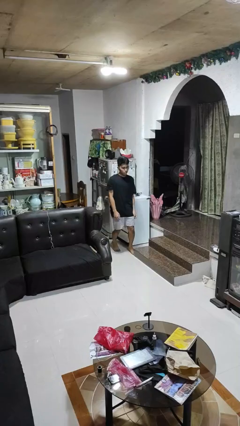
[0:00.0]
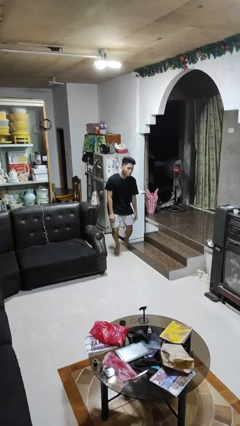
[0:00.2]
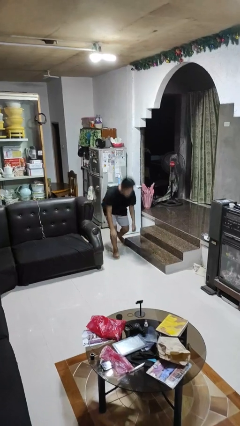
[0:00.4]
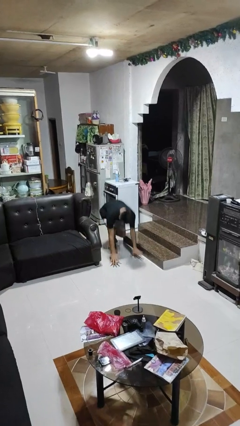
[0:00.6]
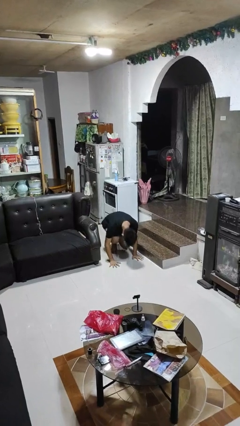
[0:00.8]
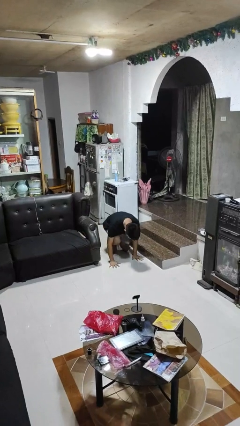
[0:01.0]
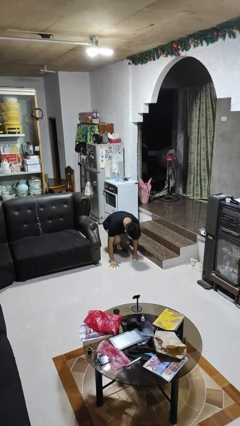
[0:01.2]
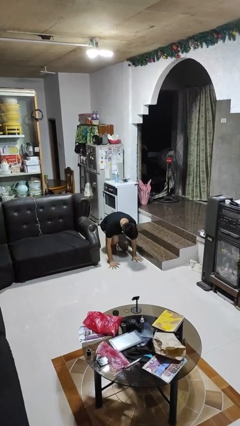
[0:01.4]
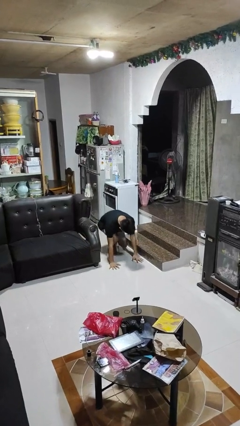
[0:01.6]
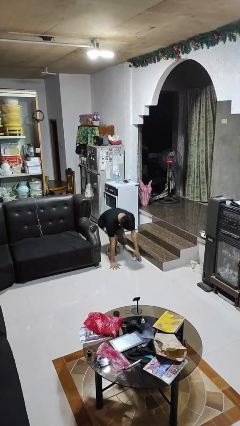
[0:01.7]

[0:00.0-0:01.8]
person trips on object on floor

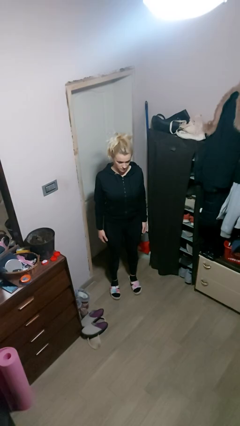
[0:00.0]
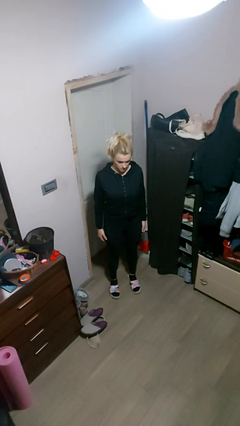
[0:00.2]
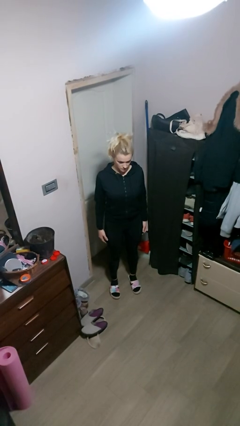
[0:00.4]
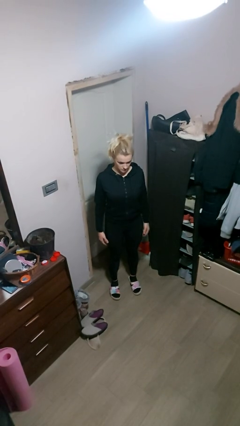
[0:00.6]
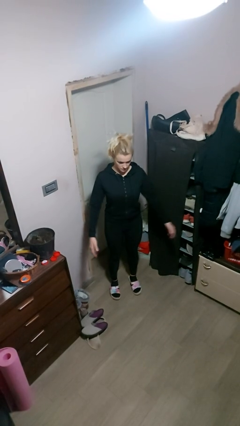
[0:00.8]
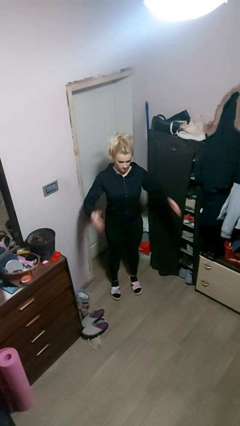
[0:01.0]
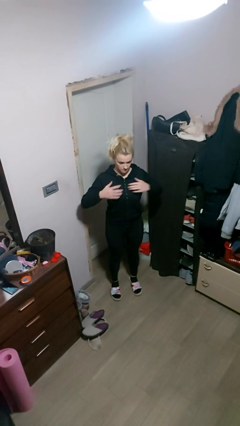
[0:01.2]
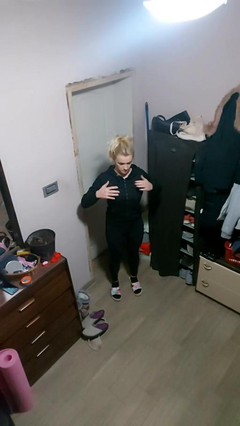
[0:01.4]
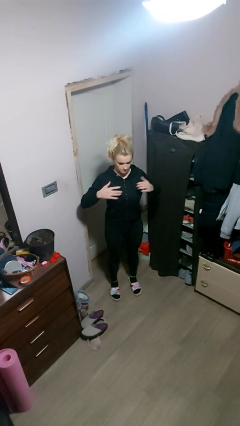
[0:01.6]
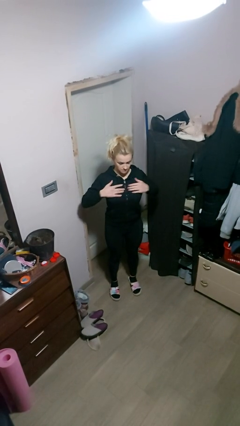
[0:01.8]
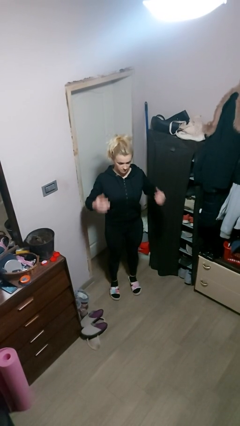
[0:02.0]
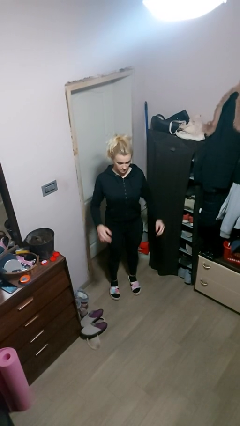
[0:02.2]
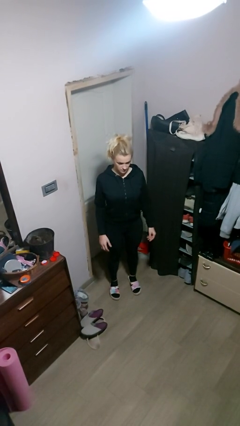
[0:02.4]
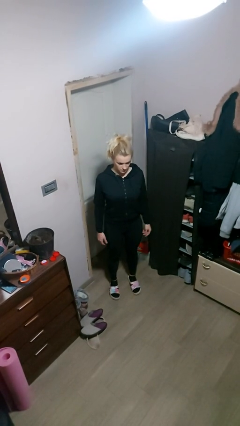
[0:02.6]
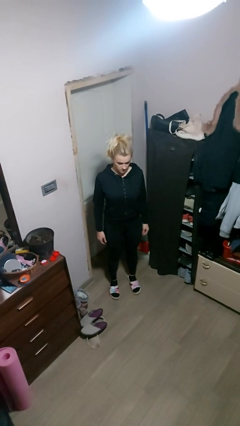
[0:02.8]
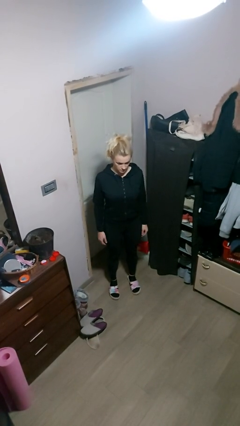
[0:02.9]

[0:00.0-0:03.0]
person drums on chest

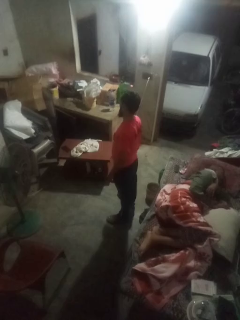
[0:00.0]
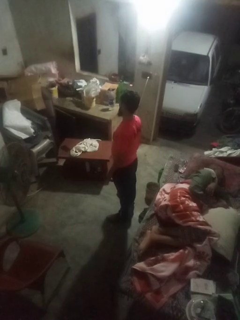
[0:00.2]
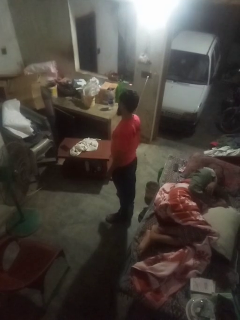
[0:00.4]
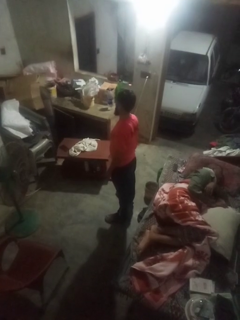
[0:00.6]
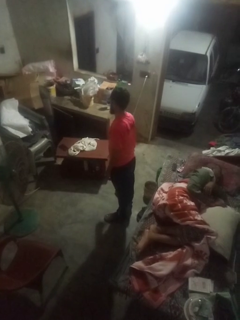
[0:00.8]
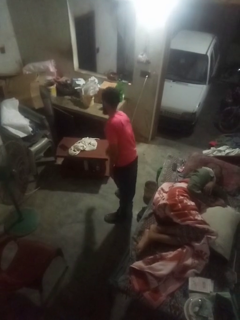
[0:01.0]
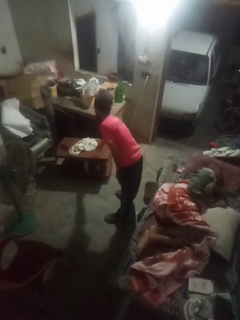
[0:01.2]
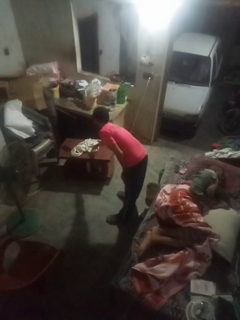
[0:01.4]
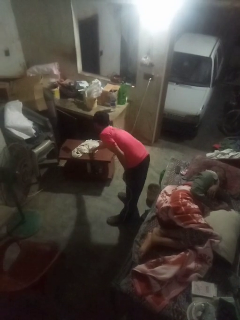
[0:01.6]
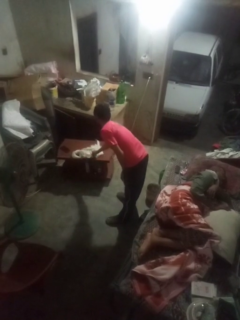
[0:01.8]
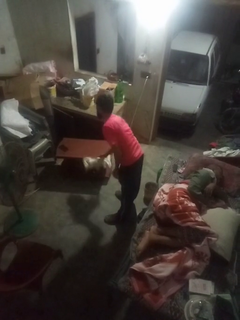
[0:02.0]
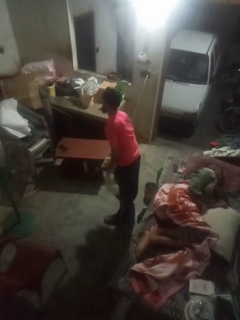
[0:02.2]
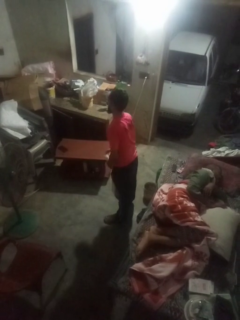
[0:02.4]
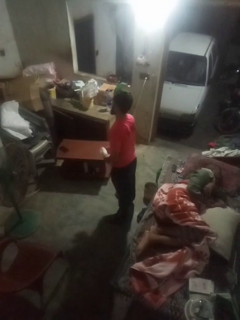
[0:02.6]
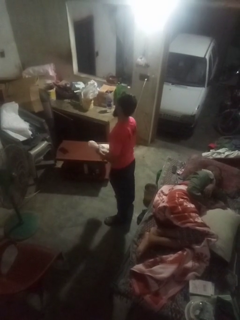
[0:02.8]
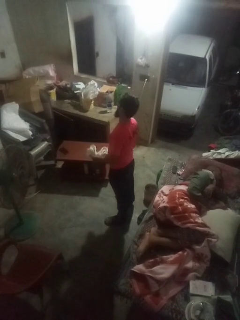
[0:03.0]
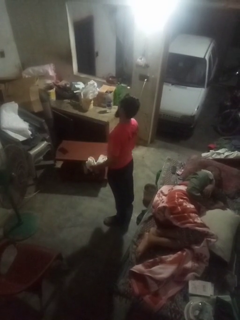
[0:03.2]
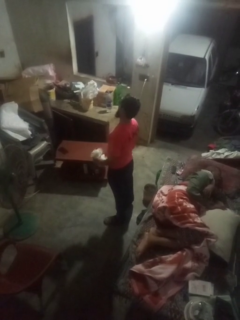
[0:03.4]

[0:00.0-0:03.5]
person picks up object from table

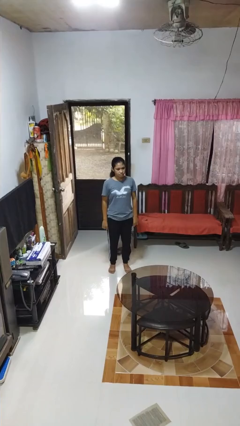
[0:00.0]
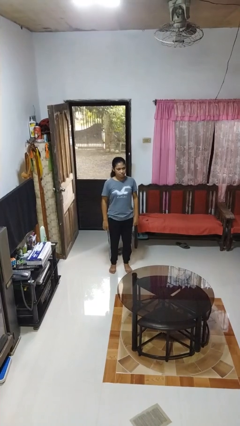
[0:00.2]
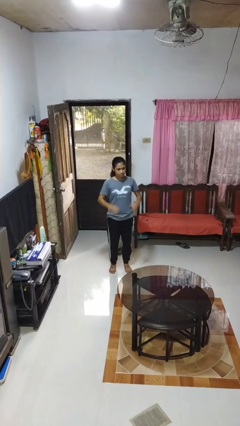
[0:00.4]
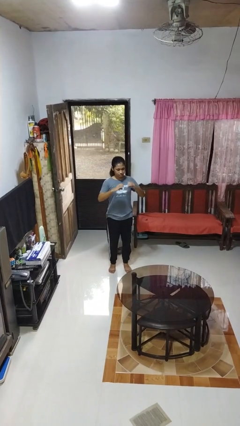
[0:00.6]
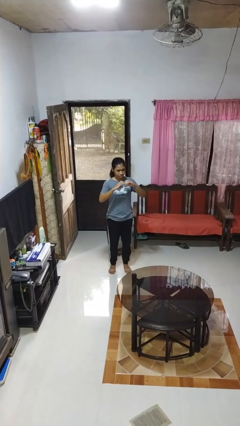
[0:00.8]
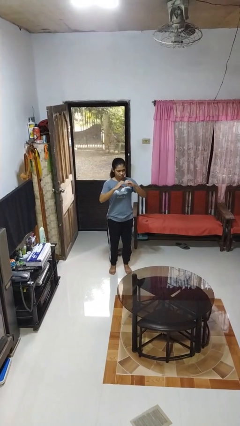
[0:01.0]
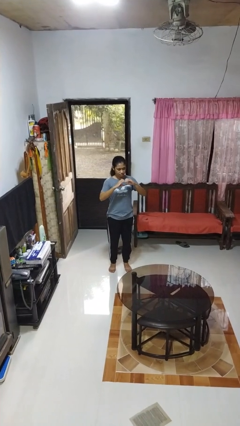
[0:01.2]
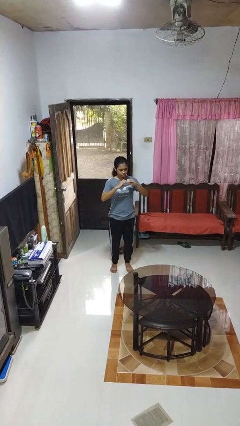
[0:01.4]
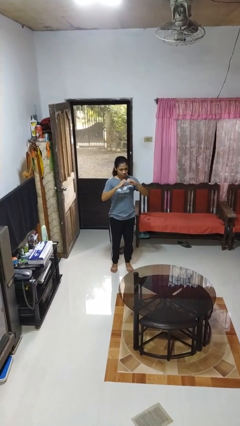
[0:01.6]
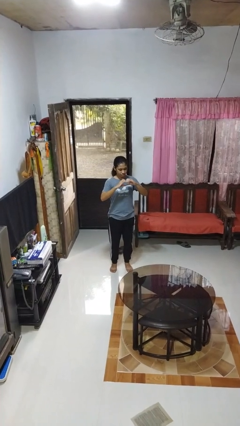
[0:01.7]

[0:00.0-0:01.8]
person gestures heart

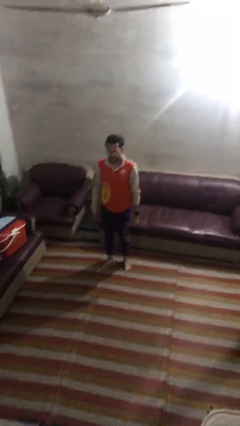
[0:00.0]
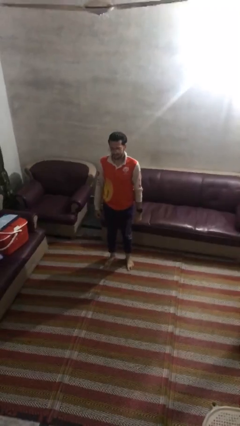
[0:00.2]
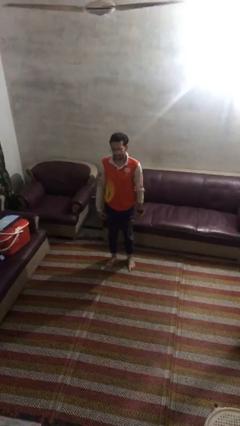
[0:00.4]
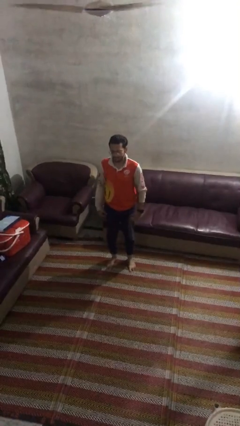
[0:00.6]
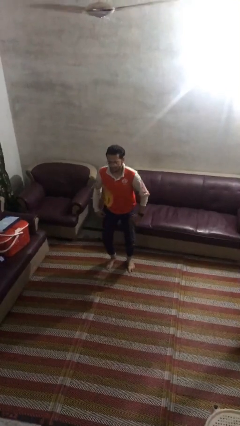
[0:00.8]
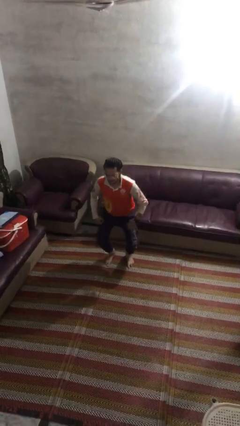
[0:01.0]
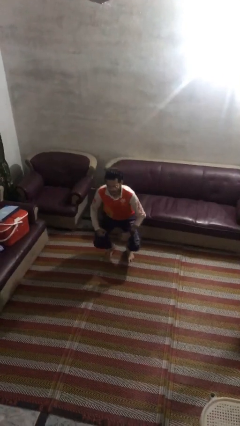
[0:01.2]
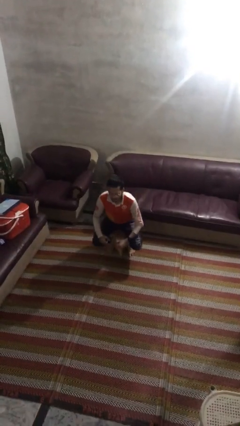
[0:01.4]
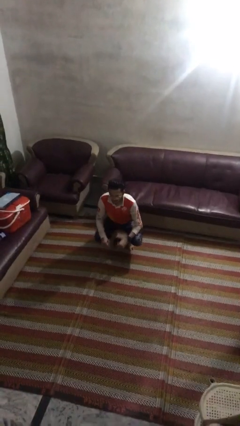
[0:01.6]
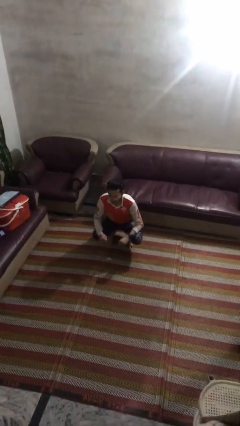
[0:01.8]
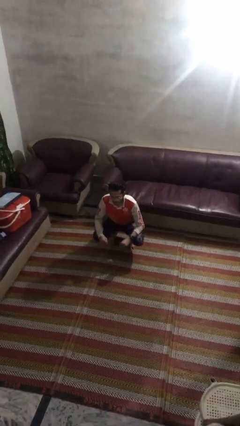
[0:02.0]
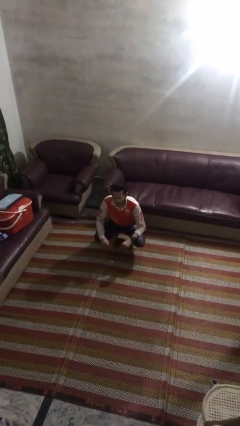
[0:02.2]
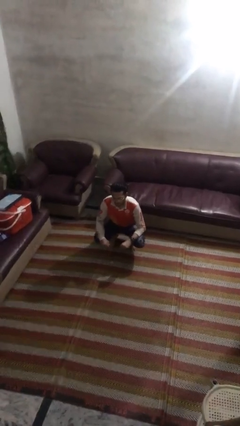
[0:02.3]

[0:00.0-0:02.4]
person squats

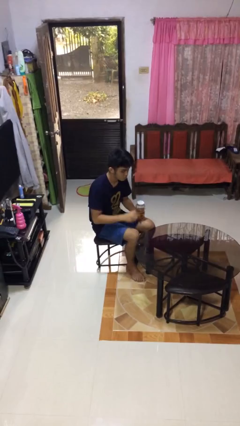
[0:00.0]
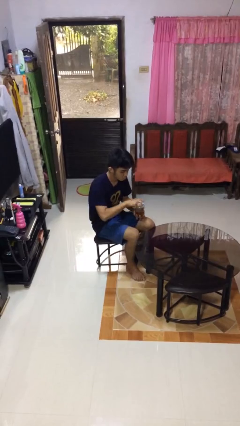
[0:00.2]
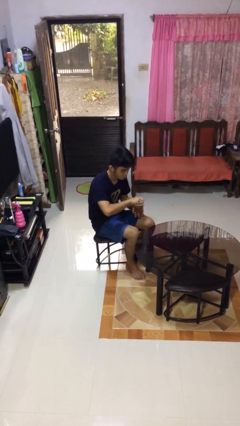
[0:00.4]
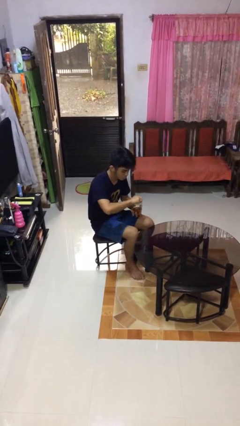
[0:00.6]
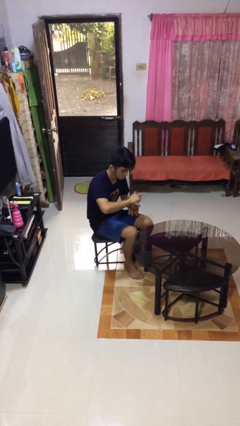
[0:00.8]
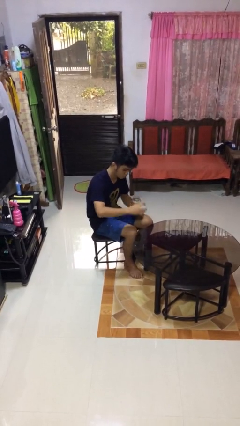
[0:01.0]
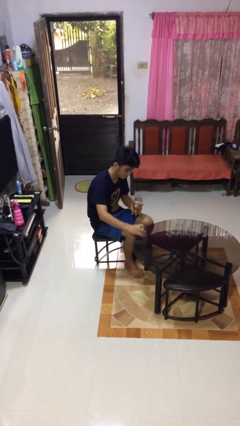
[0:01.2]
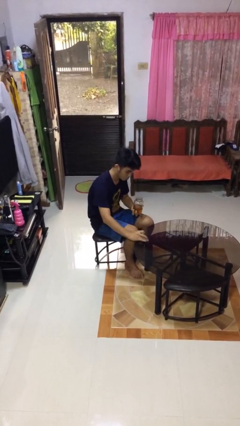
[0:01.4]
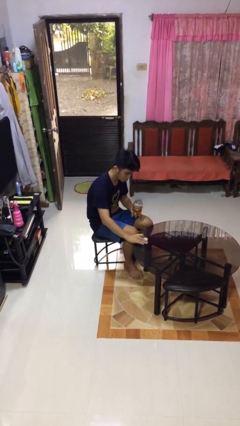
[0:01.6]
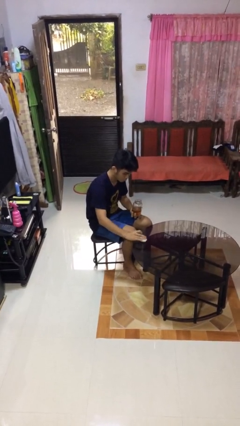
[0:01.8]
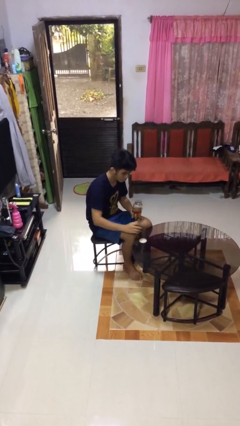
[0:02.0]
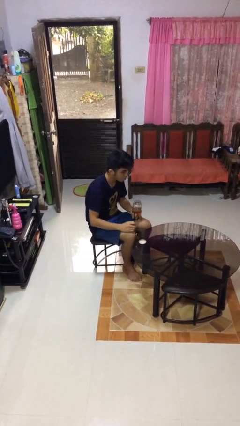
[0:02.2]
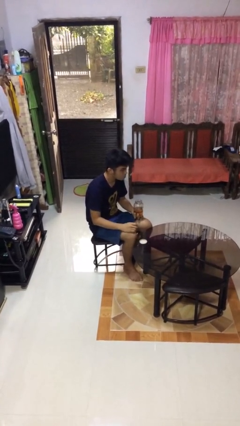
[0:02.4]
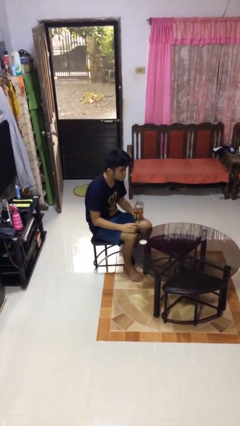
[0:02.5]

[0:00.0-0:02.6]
person opens jar

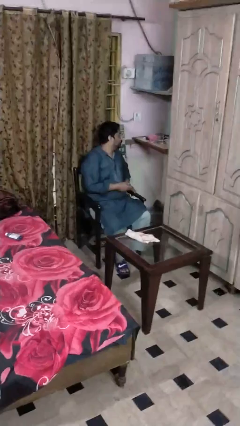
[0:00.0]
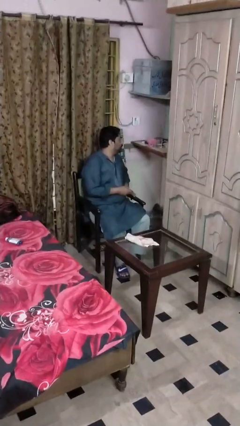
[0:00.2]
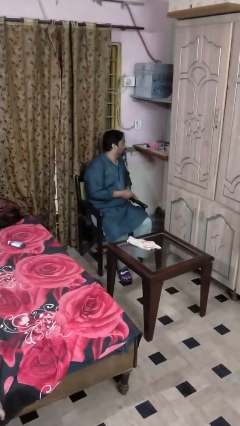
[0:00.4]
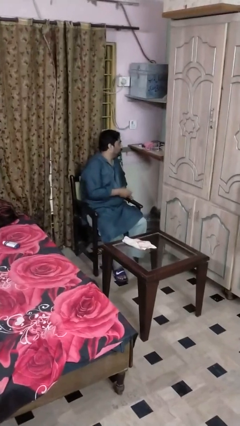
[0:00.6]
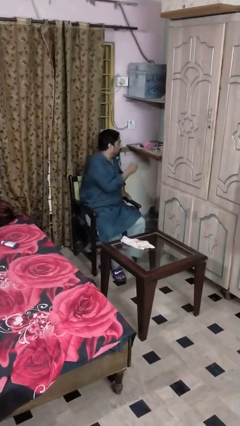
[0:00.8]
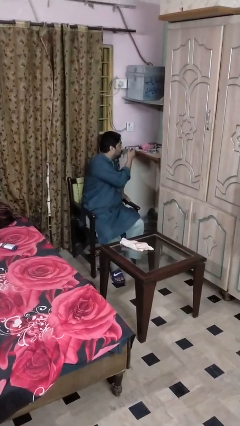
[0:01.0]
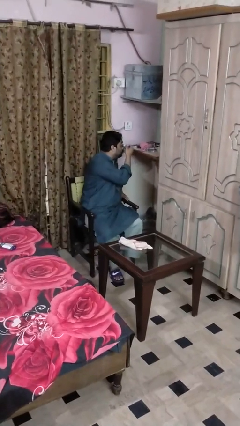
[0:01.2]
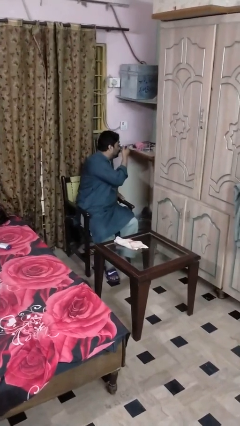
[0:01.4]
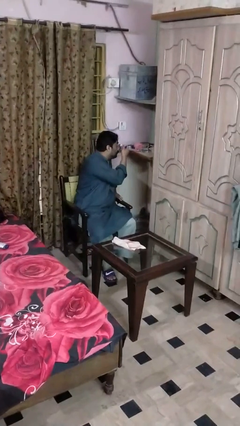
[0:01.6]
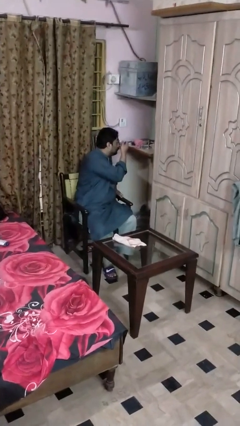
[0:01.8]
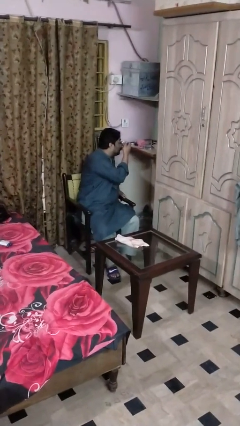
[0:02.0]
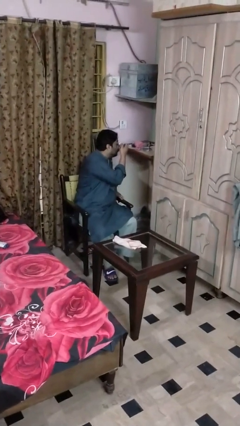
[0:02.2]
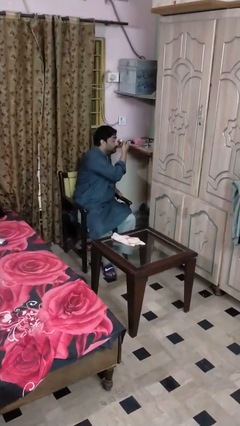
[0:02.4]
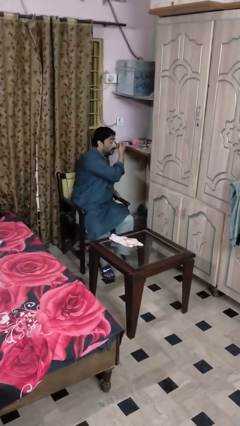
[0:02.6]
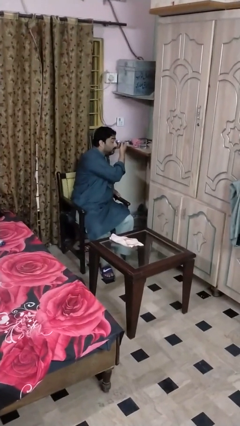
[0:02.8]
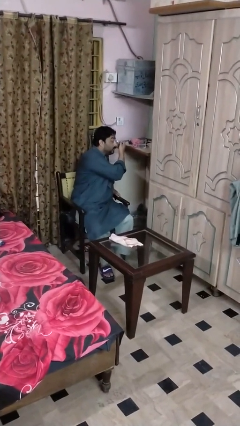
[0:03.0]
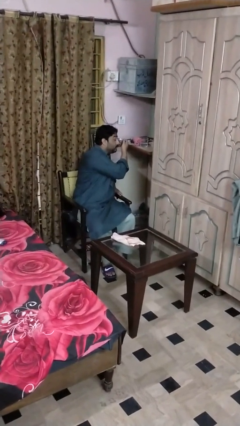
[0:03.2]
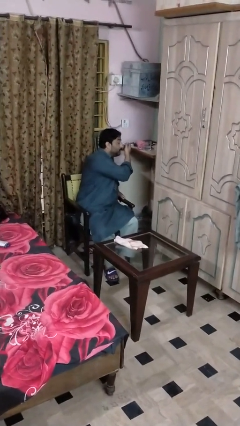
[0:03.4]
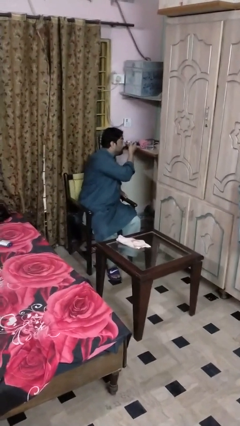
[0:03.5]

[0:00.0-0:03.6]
person applies eye makeup
